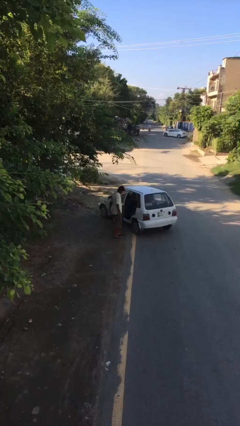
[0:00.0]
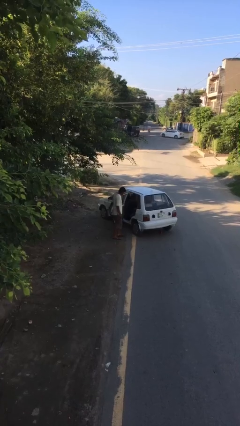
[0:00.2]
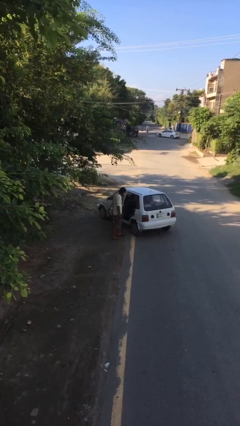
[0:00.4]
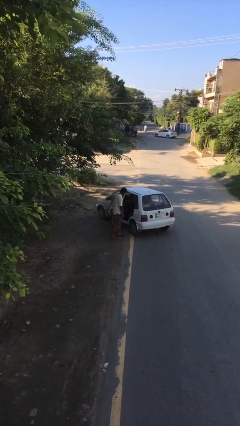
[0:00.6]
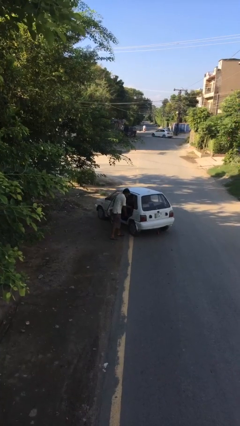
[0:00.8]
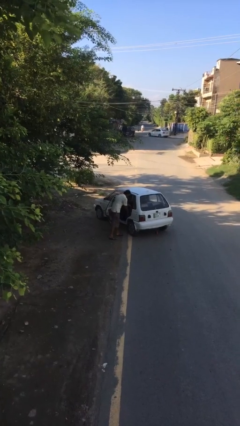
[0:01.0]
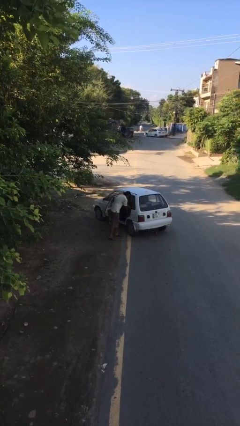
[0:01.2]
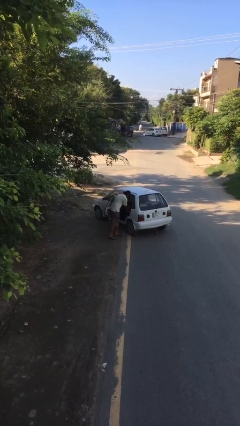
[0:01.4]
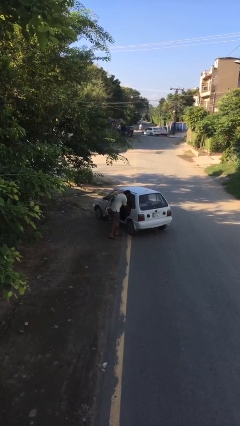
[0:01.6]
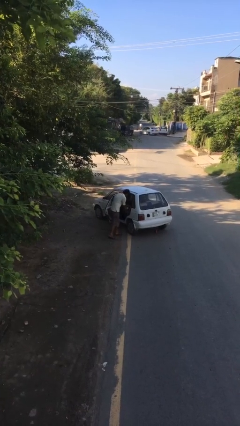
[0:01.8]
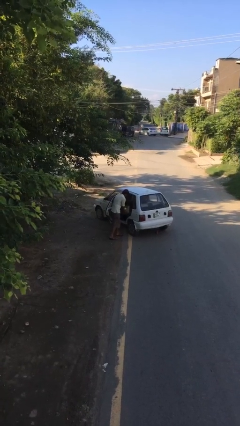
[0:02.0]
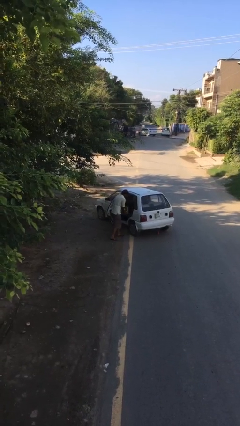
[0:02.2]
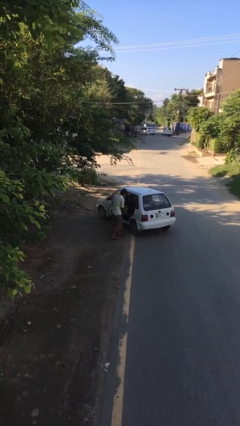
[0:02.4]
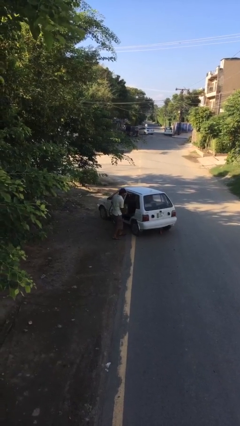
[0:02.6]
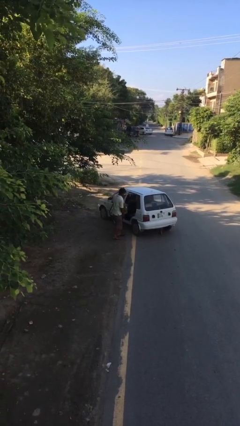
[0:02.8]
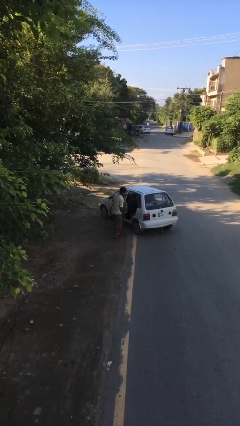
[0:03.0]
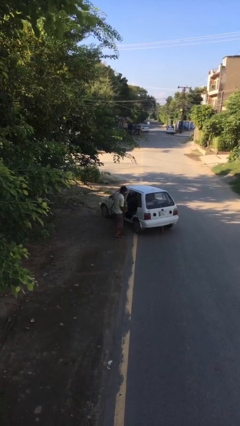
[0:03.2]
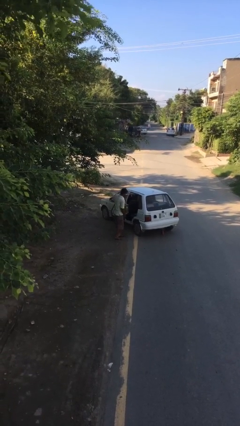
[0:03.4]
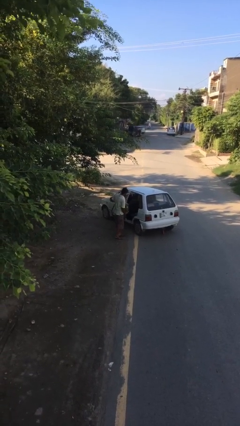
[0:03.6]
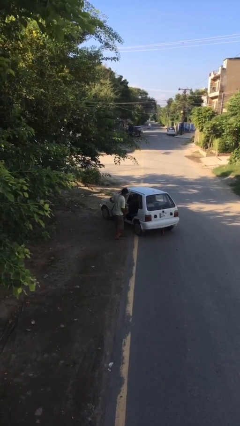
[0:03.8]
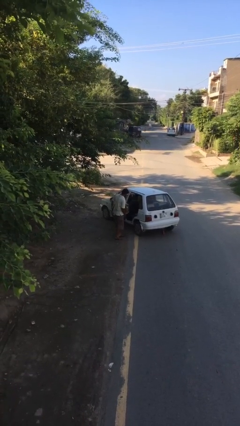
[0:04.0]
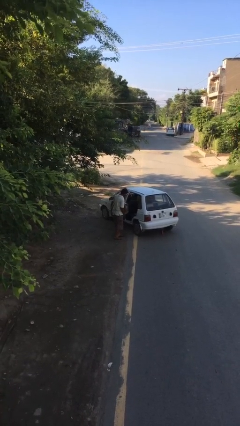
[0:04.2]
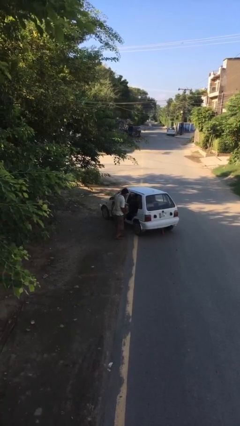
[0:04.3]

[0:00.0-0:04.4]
person unloads car

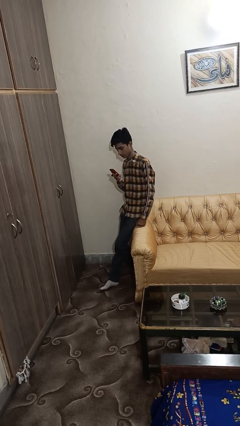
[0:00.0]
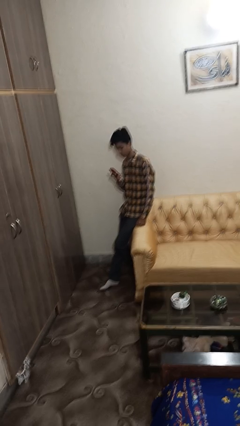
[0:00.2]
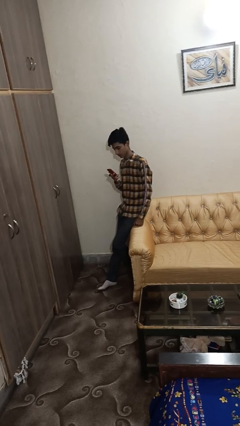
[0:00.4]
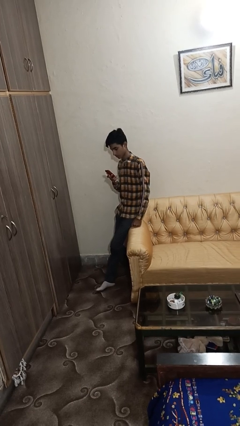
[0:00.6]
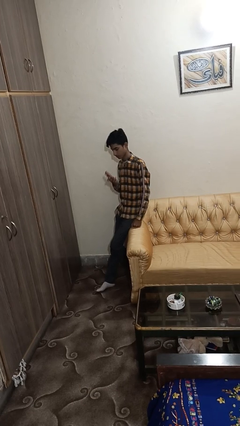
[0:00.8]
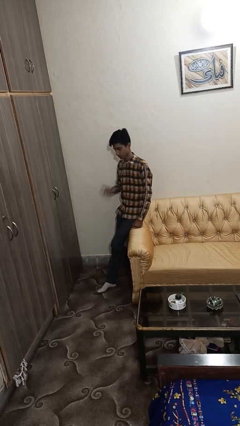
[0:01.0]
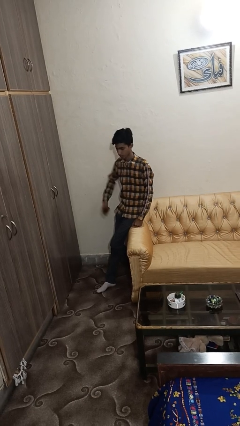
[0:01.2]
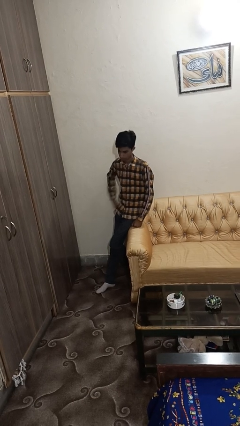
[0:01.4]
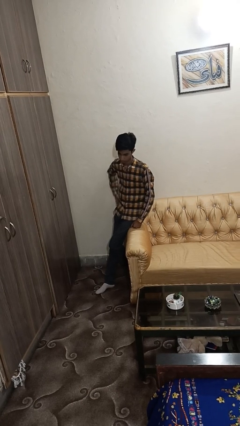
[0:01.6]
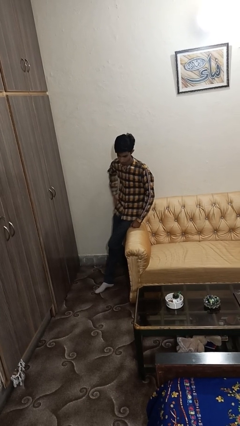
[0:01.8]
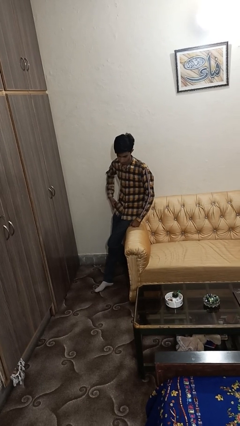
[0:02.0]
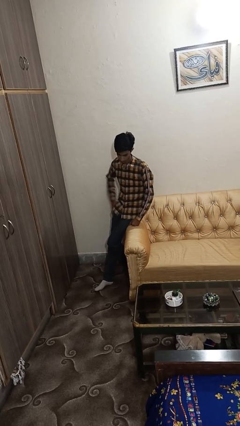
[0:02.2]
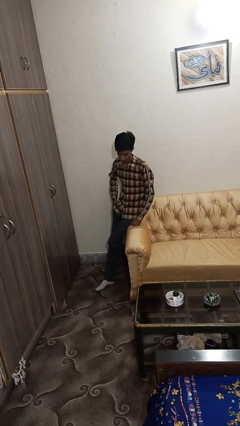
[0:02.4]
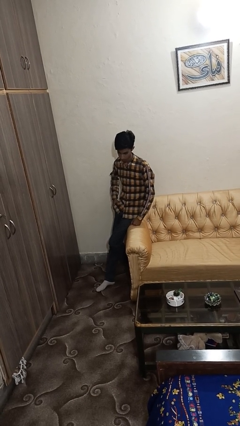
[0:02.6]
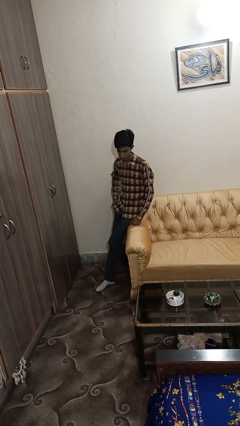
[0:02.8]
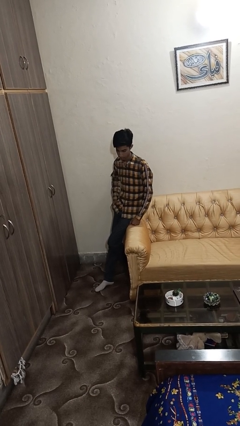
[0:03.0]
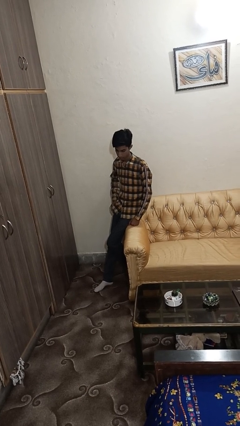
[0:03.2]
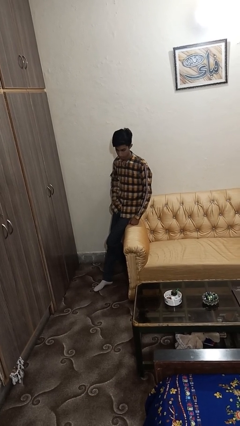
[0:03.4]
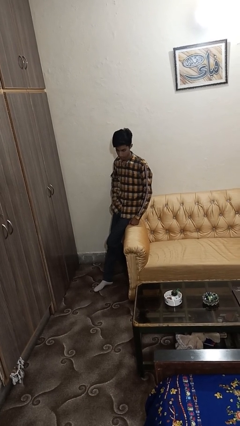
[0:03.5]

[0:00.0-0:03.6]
person puts phone into pocket

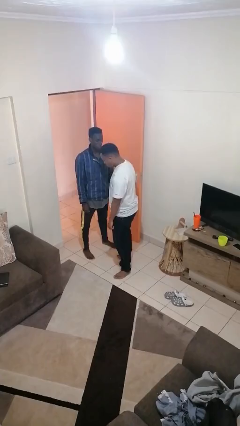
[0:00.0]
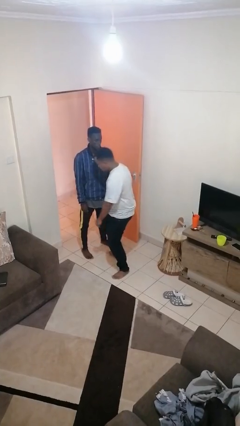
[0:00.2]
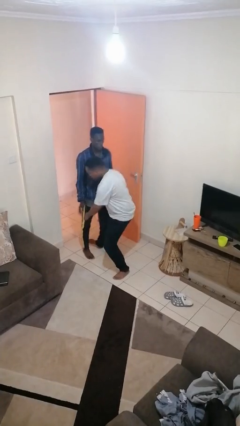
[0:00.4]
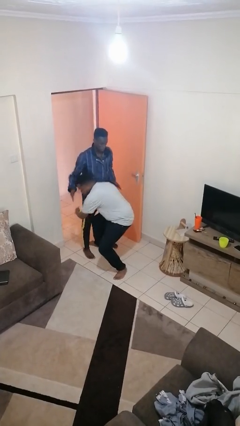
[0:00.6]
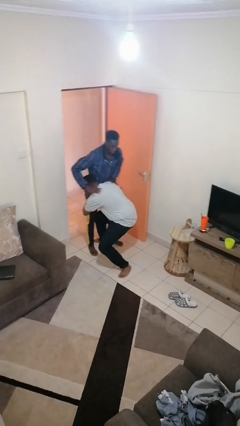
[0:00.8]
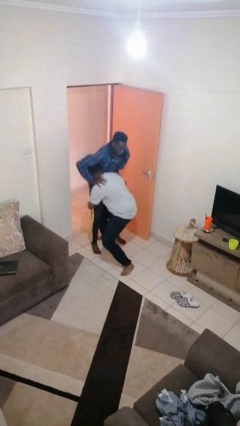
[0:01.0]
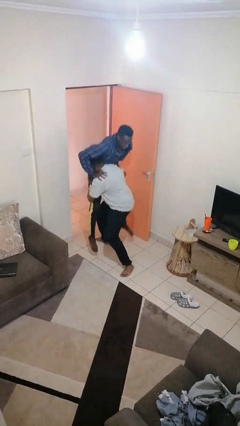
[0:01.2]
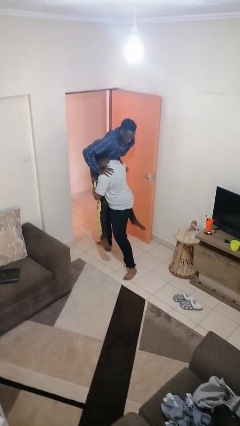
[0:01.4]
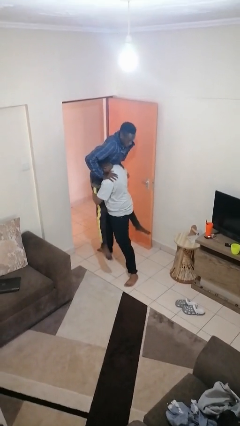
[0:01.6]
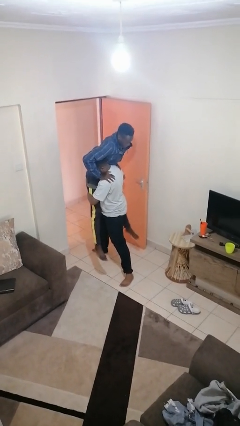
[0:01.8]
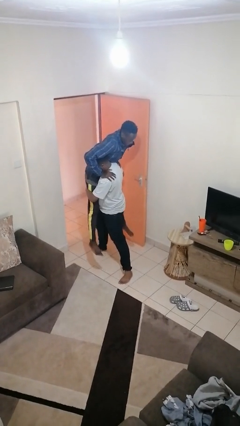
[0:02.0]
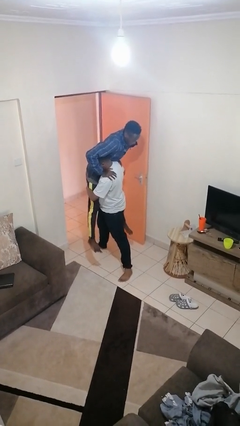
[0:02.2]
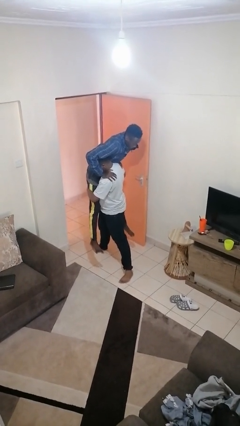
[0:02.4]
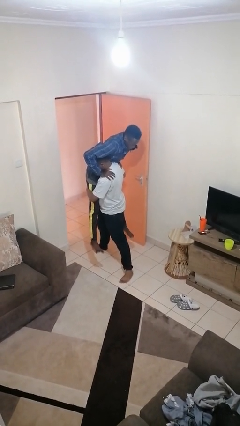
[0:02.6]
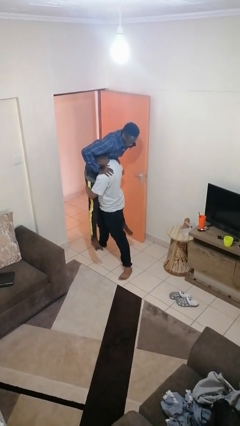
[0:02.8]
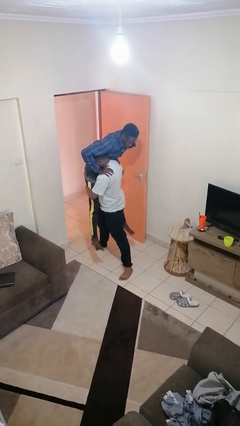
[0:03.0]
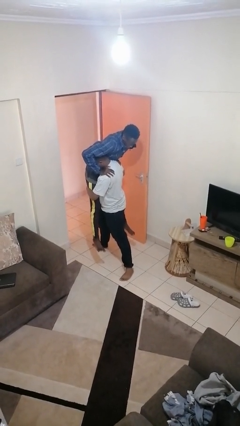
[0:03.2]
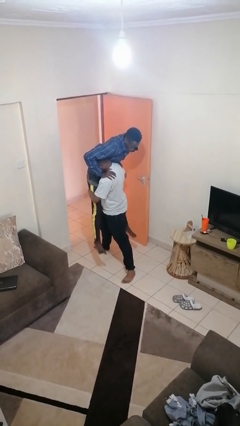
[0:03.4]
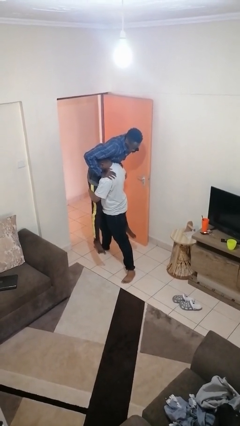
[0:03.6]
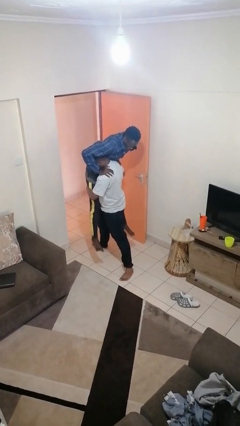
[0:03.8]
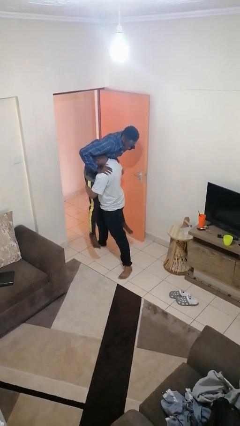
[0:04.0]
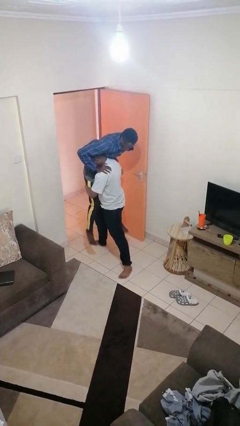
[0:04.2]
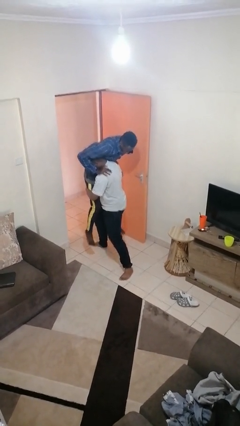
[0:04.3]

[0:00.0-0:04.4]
person picks up person

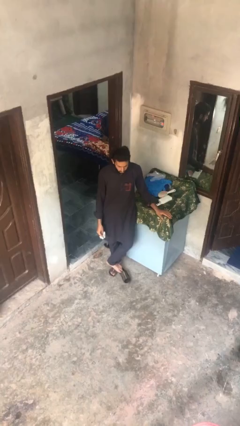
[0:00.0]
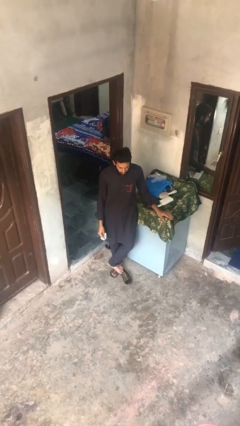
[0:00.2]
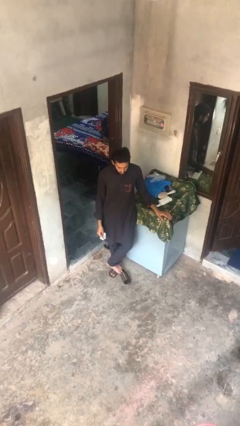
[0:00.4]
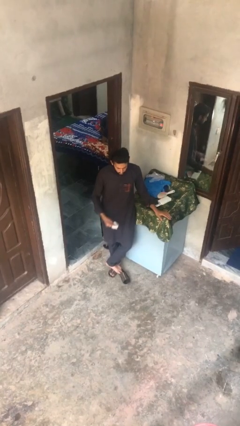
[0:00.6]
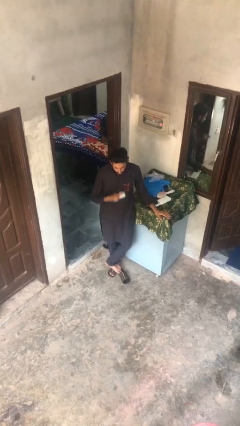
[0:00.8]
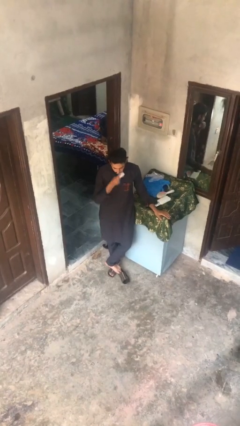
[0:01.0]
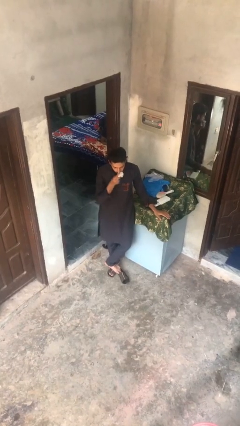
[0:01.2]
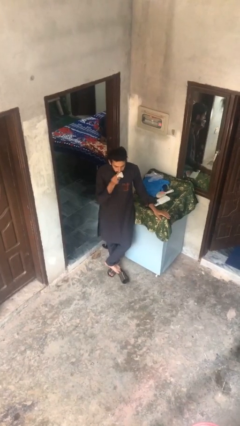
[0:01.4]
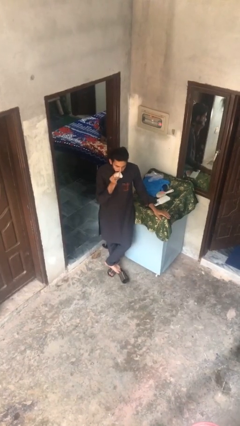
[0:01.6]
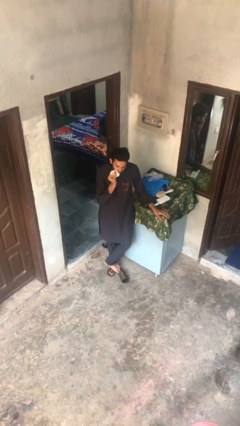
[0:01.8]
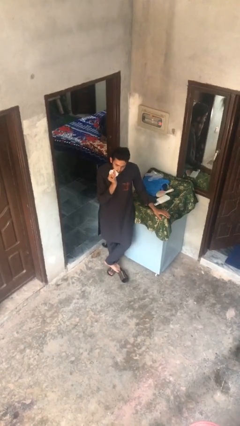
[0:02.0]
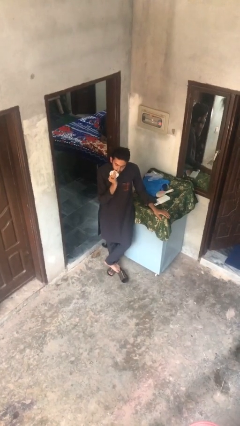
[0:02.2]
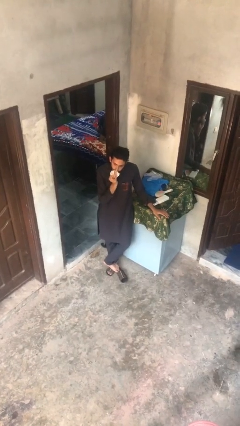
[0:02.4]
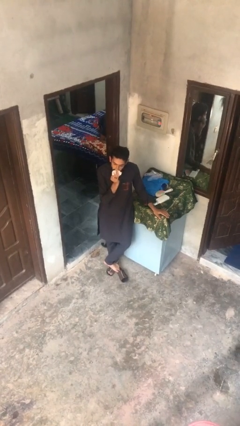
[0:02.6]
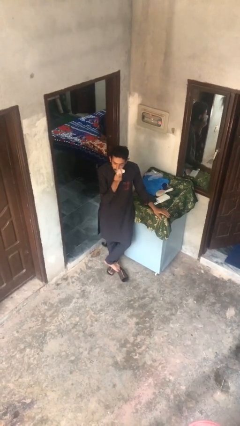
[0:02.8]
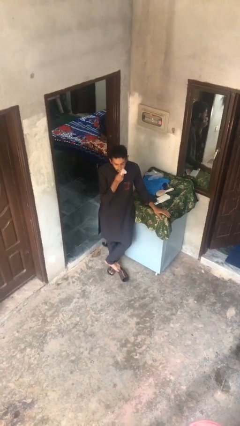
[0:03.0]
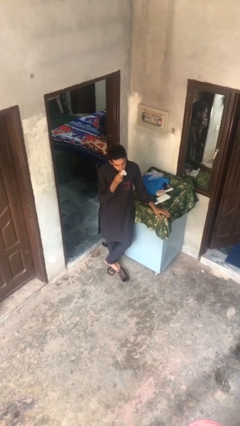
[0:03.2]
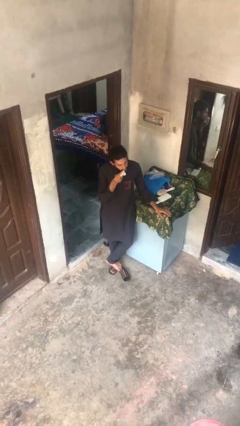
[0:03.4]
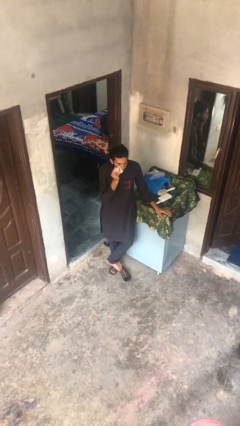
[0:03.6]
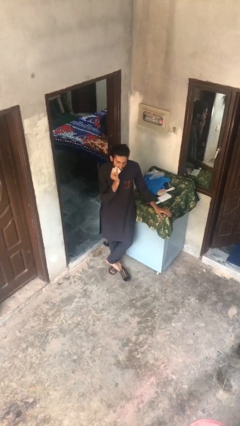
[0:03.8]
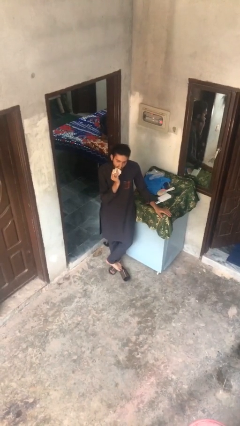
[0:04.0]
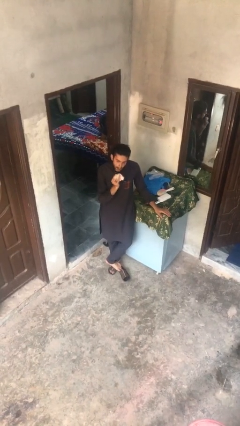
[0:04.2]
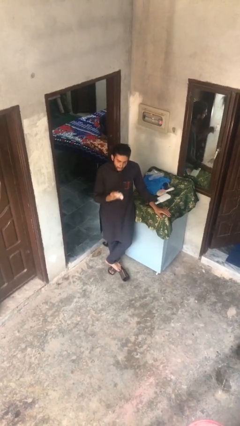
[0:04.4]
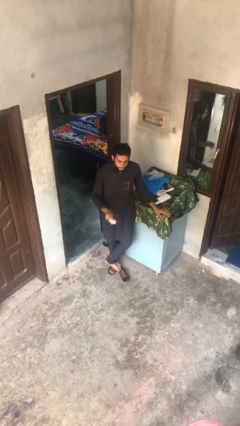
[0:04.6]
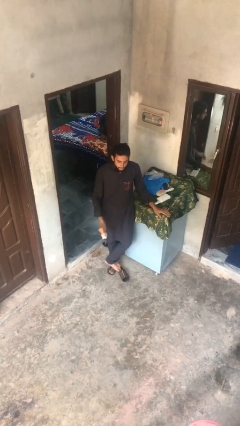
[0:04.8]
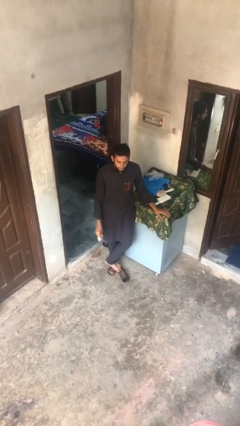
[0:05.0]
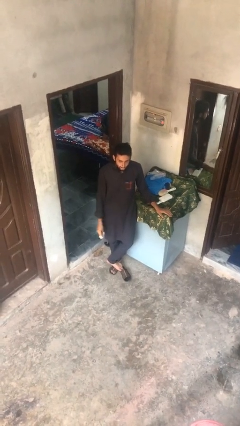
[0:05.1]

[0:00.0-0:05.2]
person wipes mouth with napkin

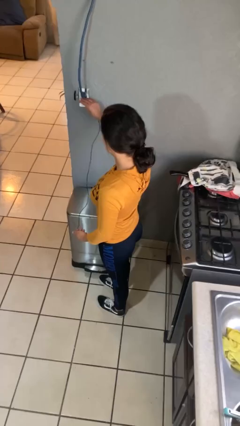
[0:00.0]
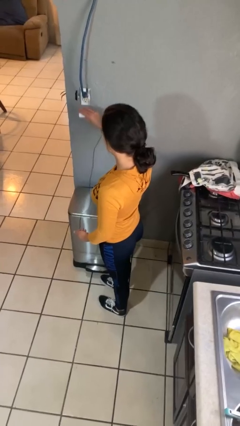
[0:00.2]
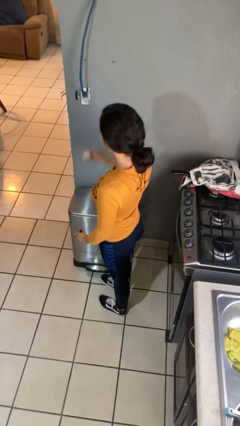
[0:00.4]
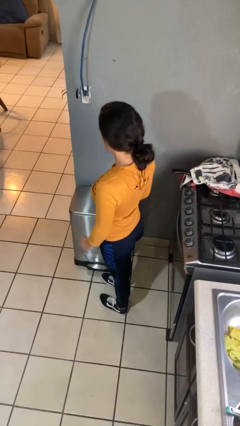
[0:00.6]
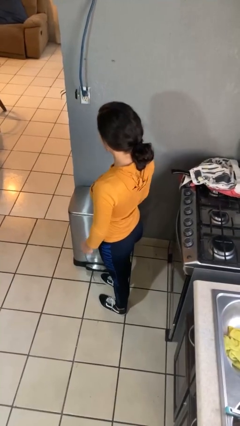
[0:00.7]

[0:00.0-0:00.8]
person unplugs from electrical socket
